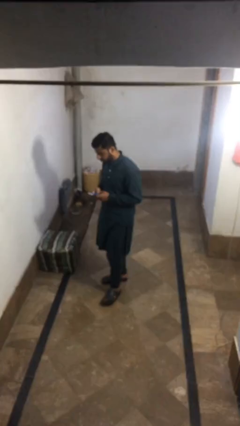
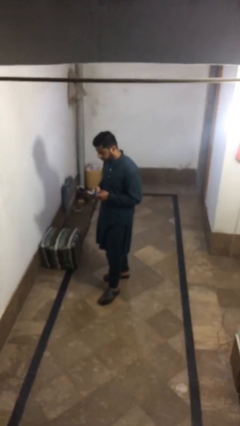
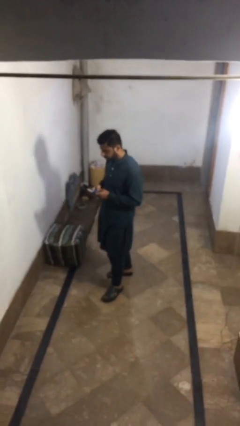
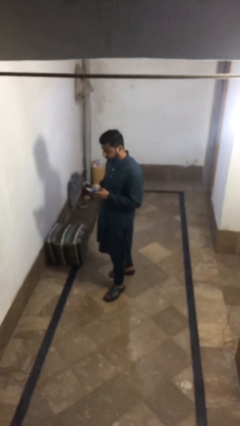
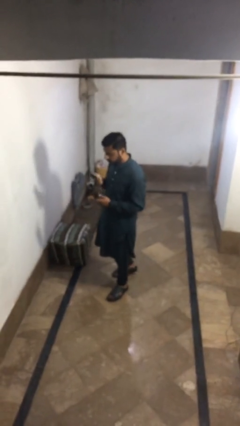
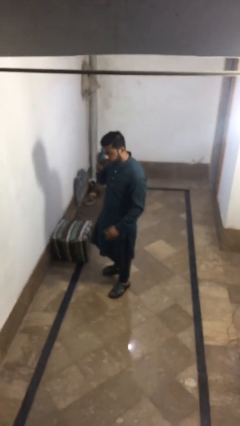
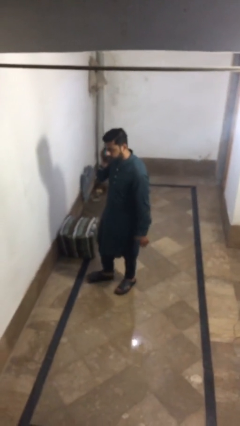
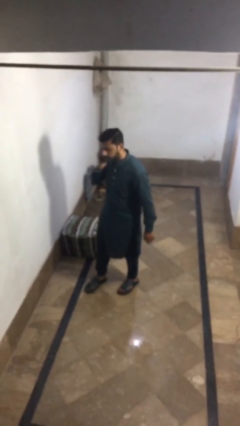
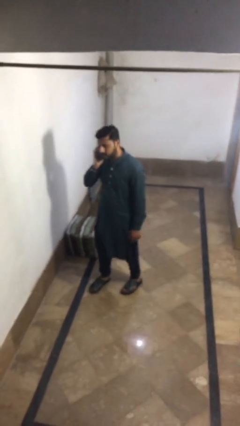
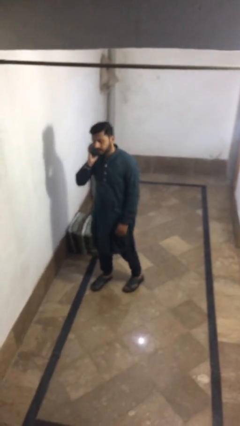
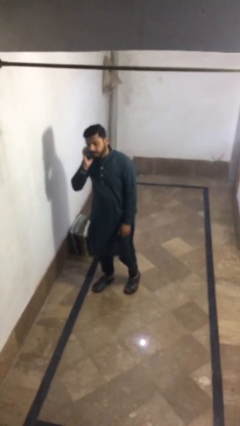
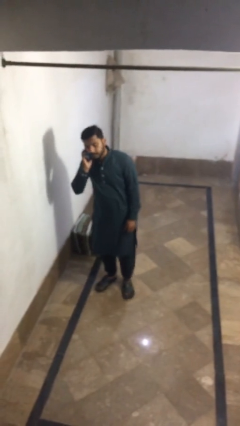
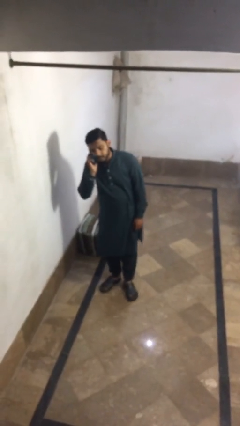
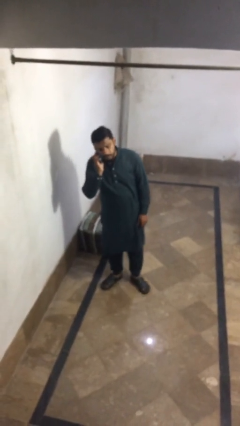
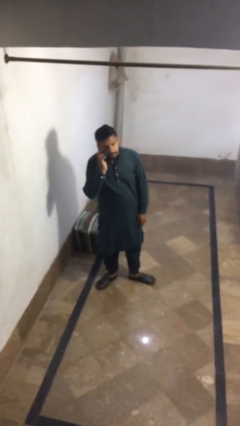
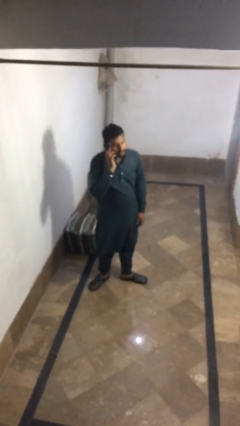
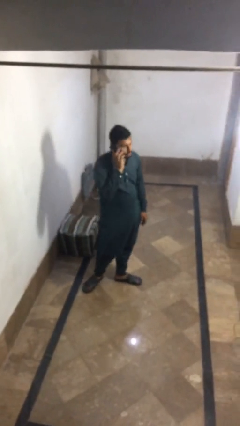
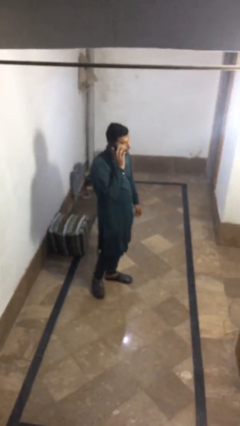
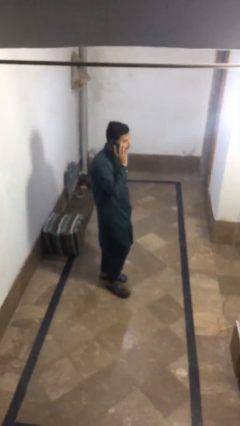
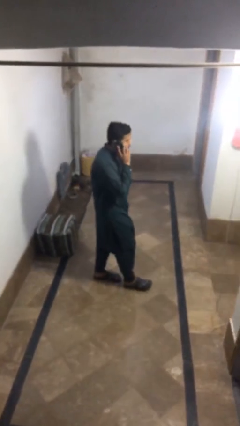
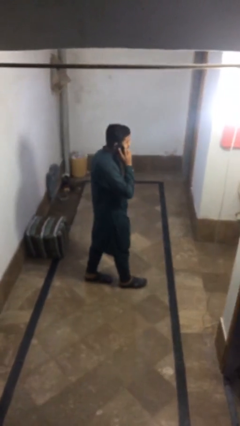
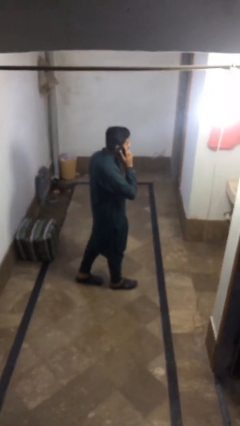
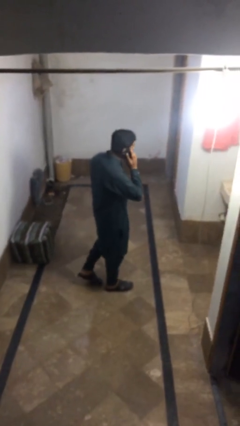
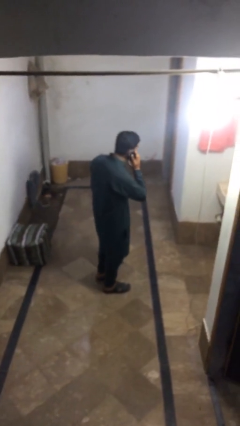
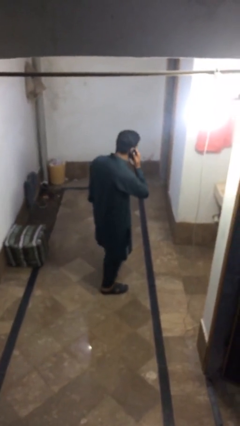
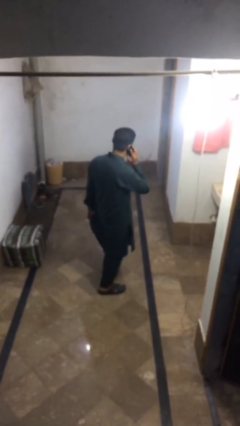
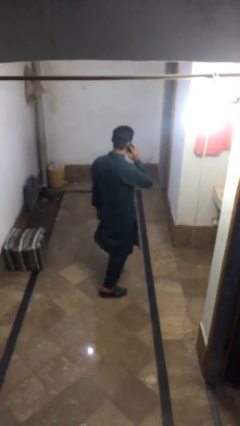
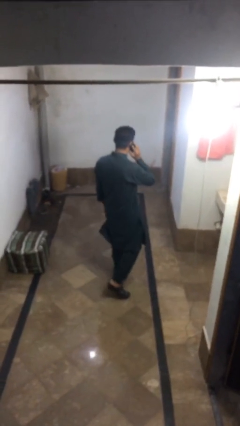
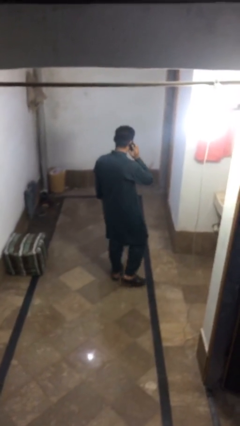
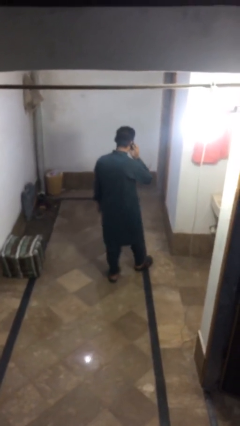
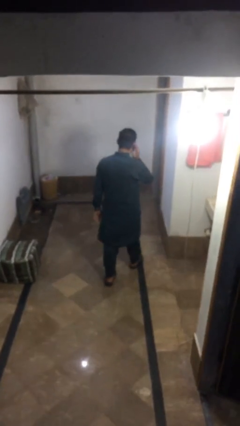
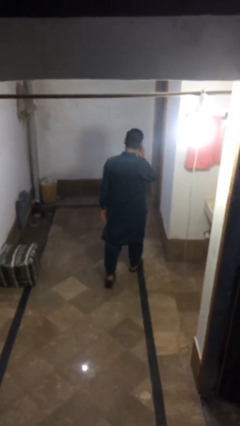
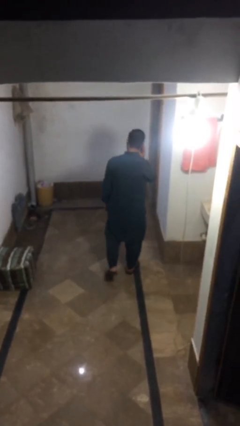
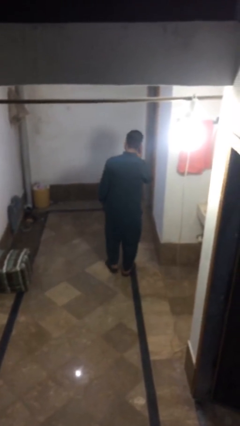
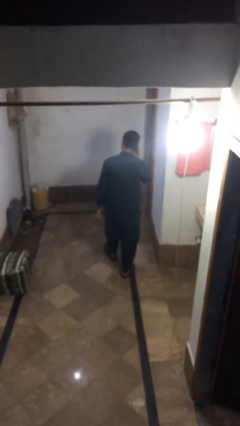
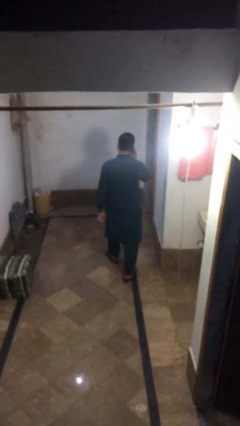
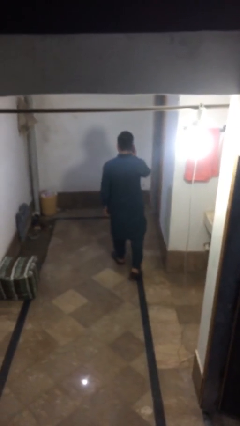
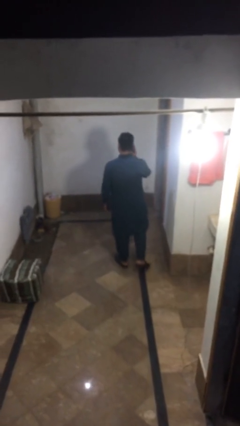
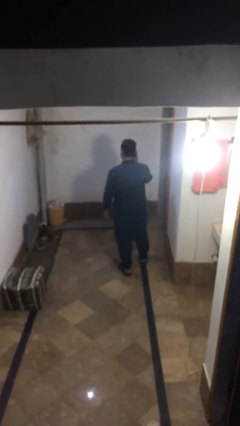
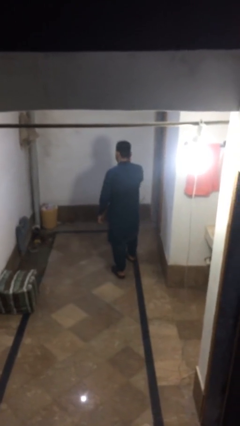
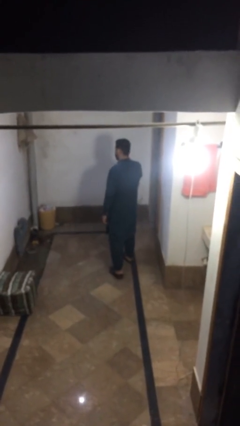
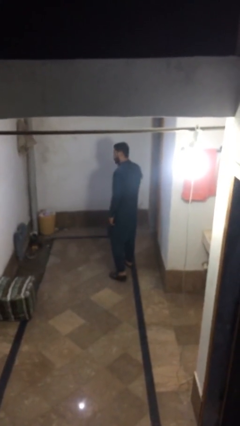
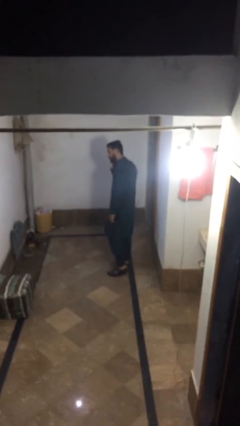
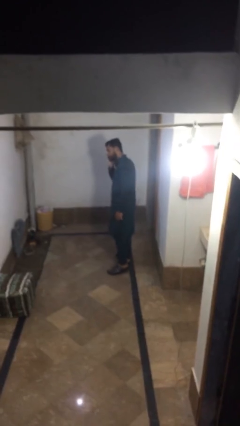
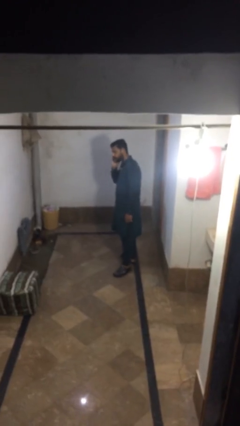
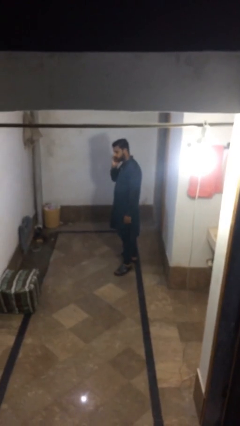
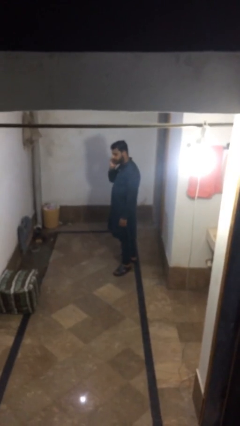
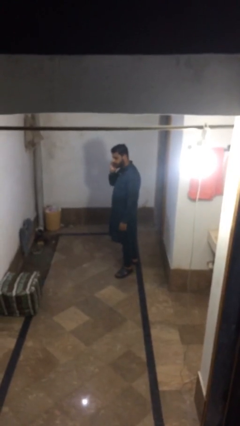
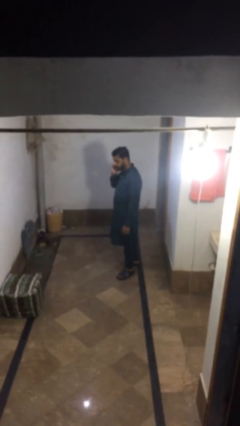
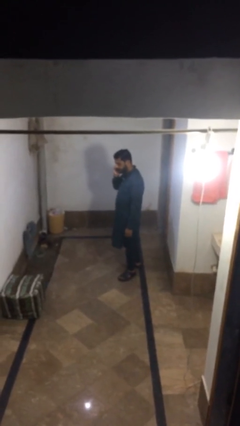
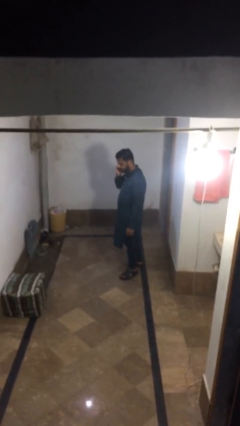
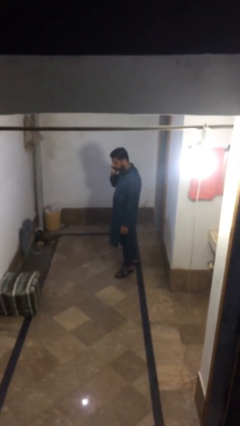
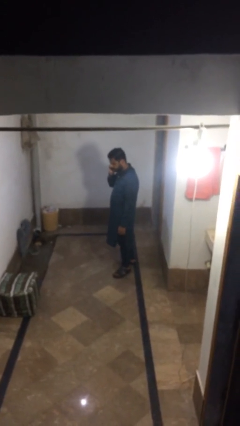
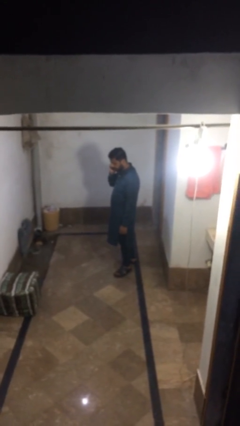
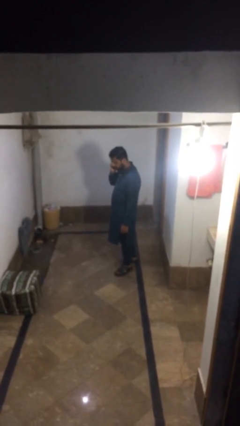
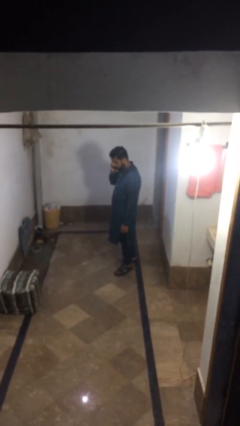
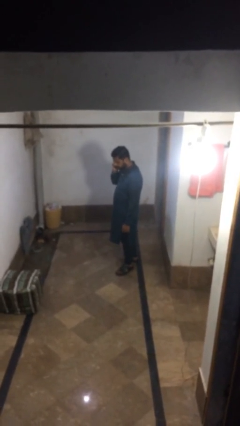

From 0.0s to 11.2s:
person talks on phone

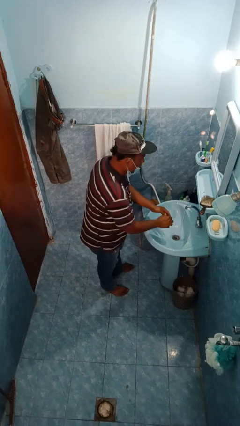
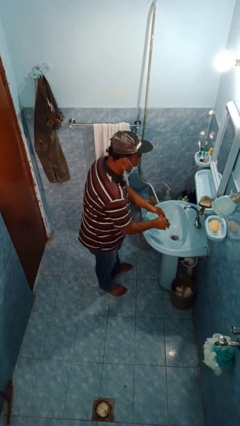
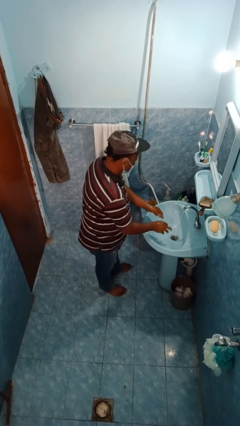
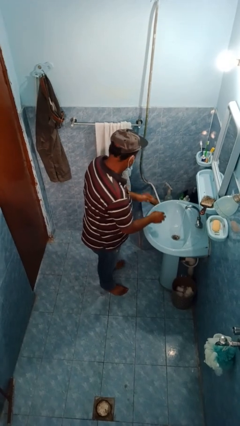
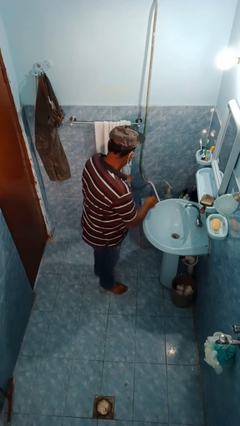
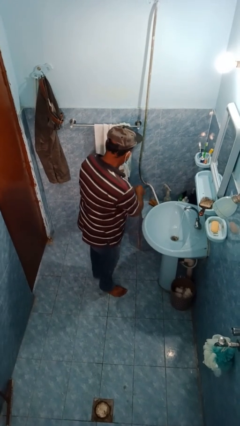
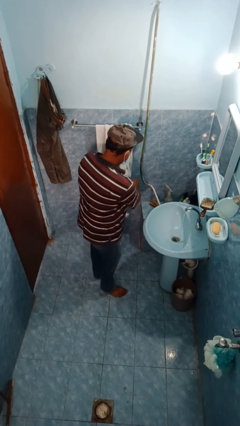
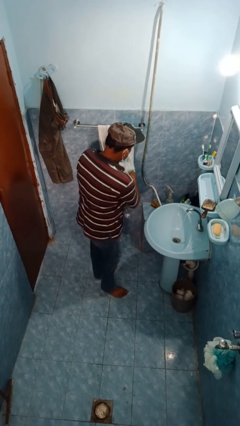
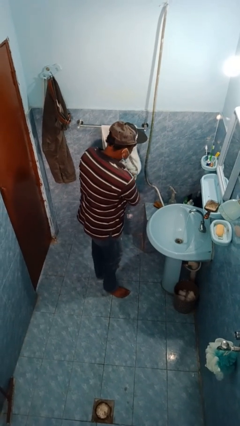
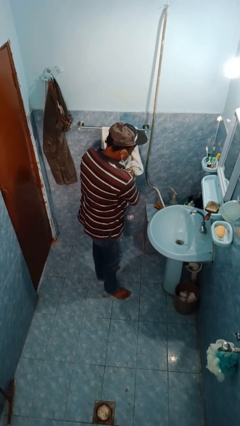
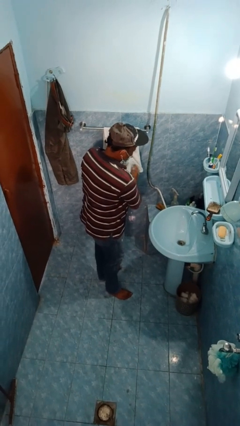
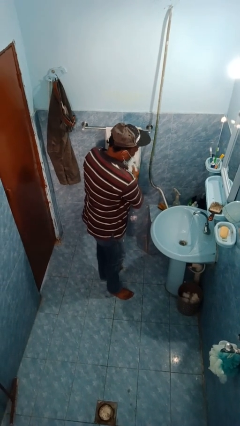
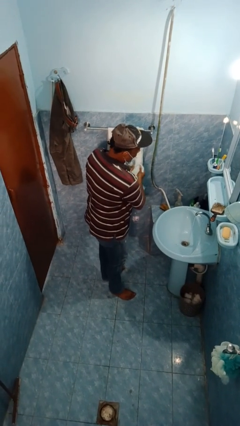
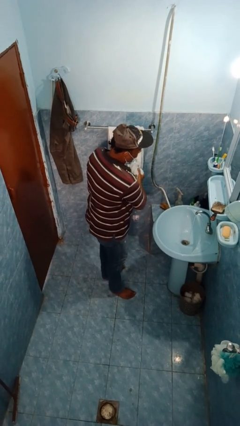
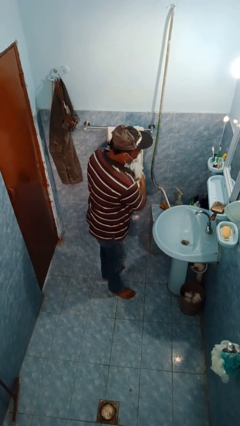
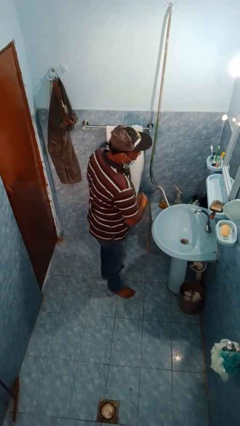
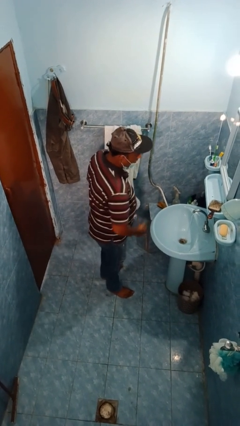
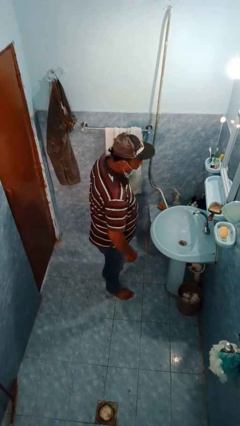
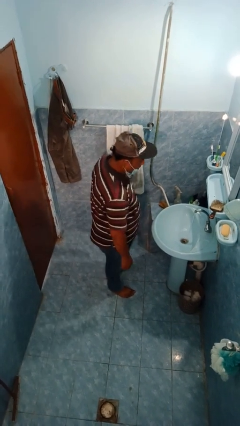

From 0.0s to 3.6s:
person dries hands with towel

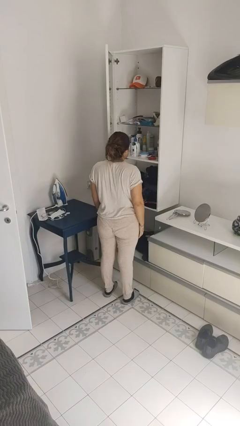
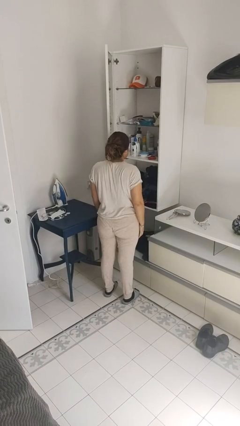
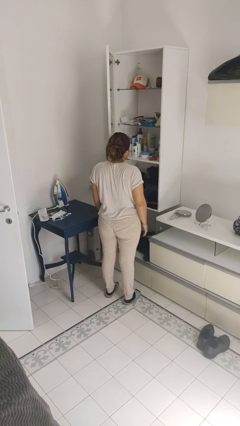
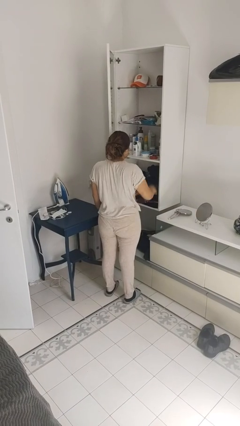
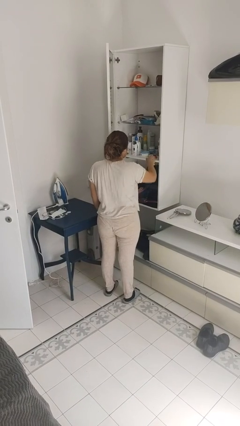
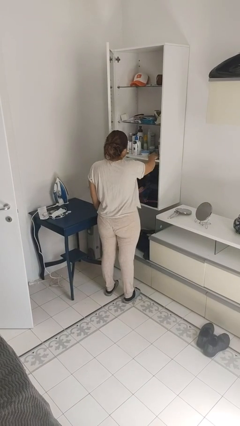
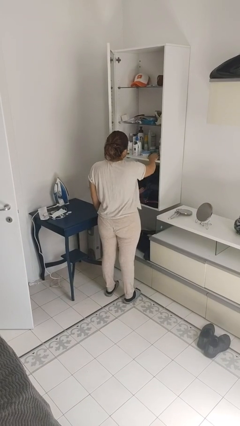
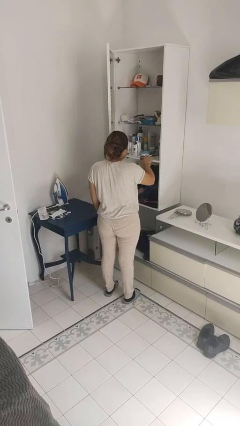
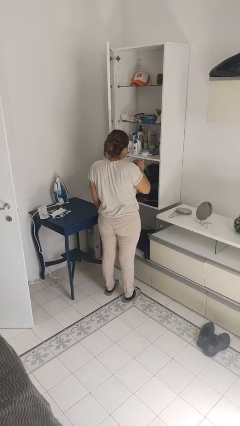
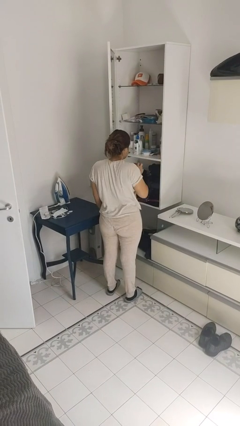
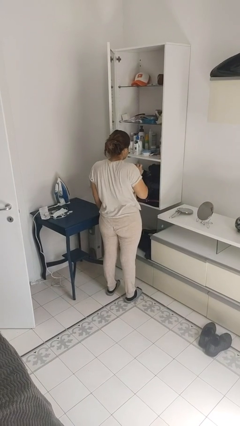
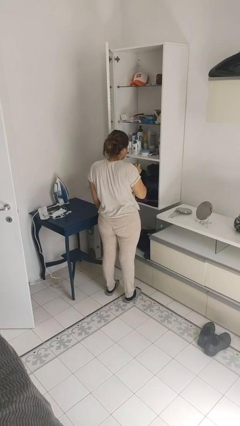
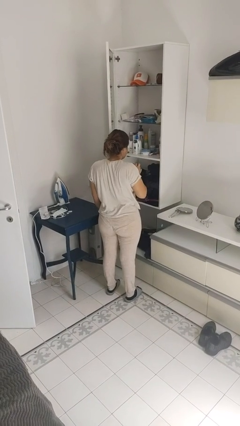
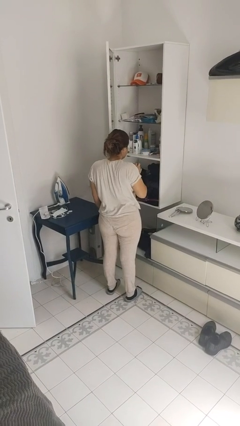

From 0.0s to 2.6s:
person picks up object from shelf

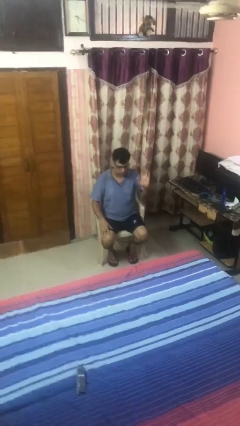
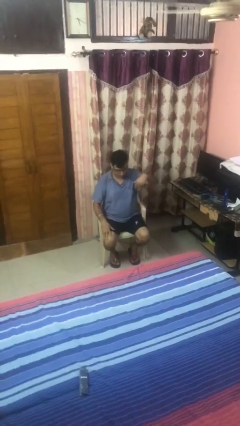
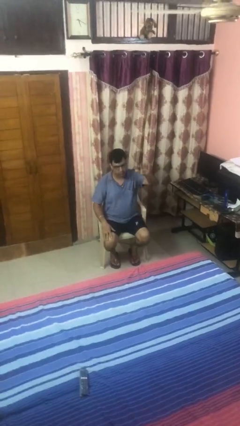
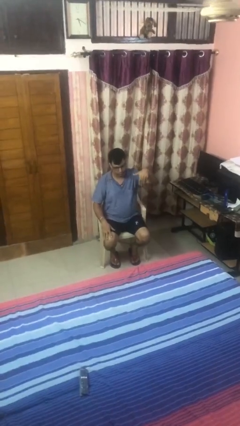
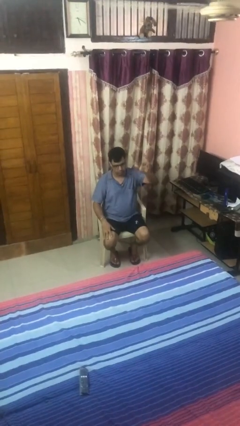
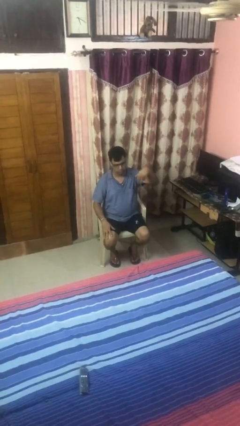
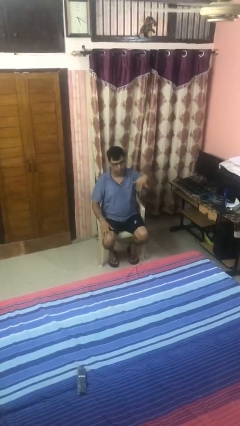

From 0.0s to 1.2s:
person gestures come here
